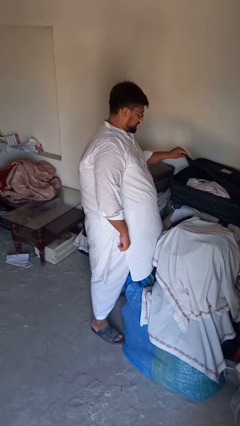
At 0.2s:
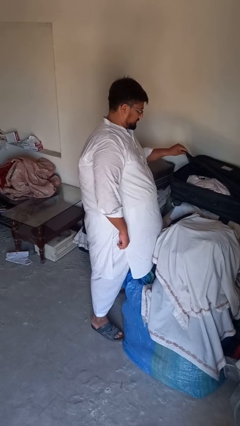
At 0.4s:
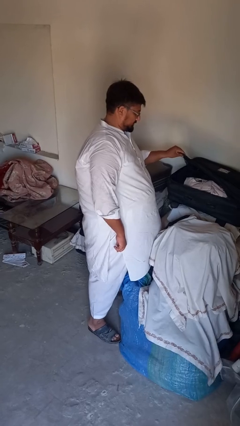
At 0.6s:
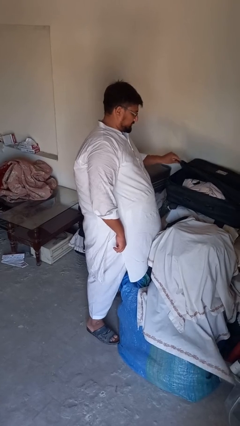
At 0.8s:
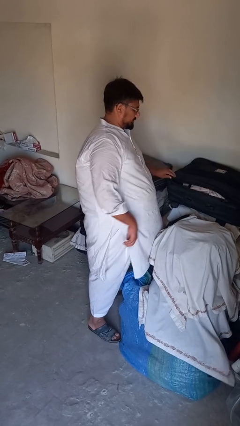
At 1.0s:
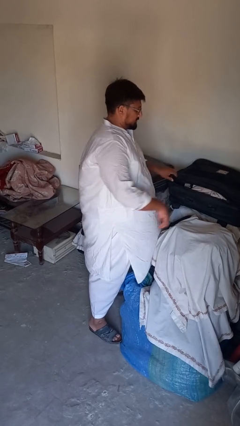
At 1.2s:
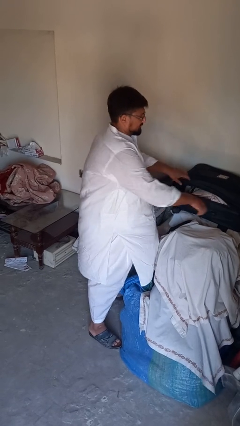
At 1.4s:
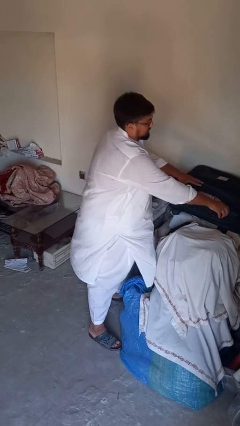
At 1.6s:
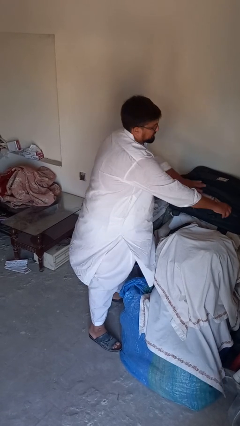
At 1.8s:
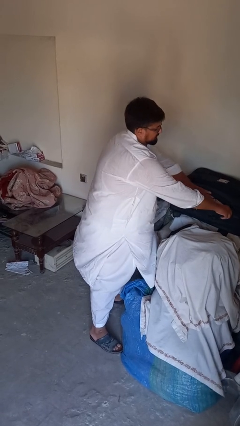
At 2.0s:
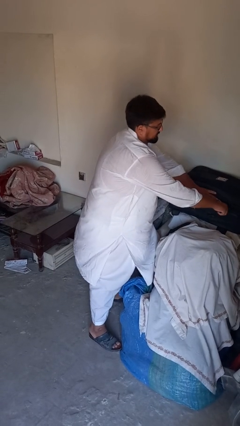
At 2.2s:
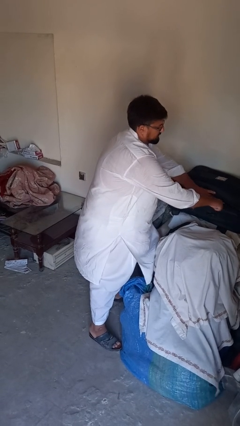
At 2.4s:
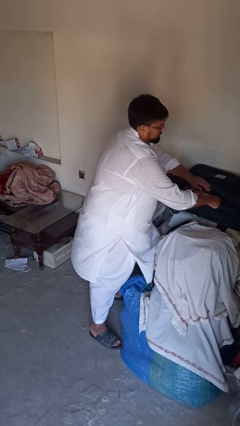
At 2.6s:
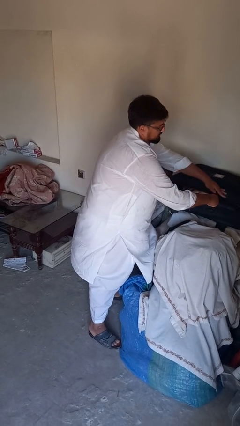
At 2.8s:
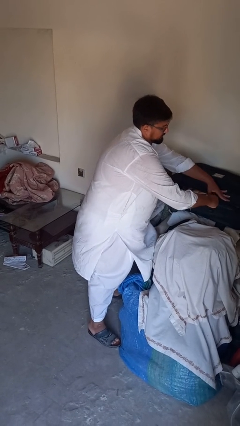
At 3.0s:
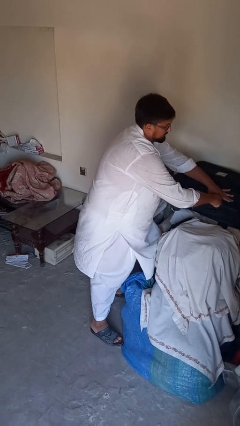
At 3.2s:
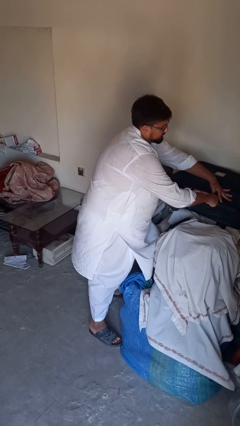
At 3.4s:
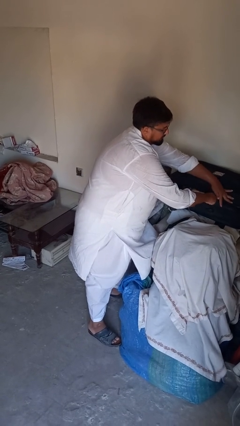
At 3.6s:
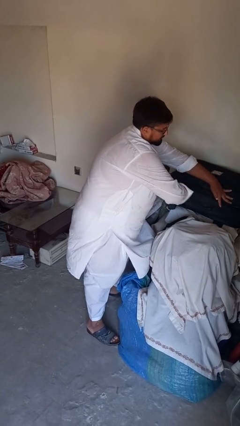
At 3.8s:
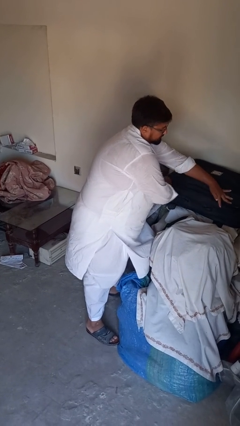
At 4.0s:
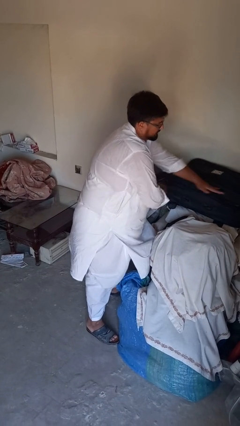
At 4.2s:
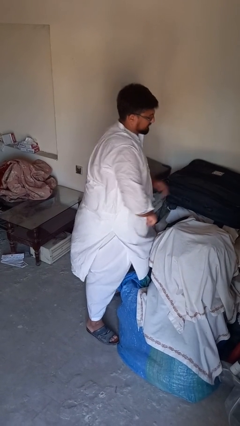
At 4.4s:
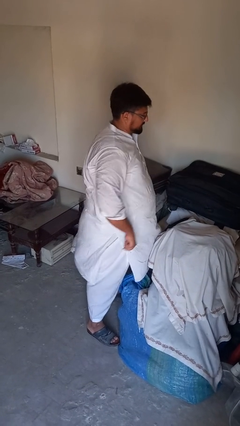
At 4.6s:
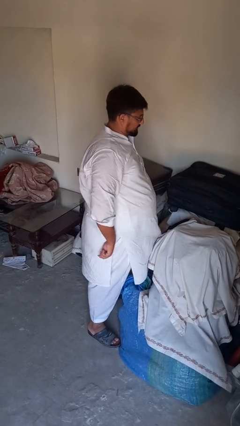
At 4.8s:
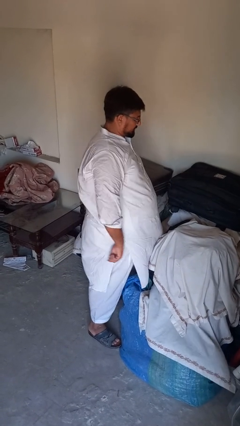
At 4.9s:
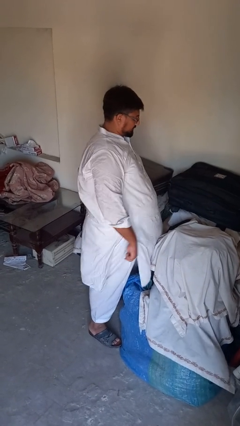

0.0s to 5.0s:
person closes suitcase

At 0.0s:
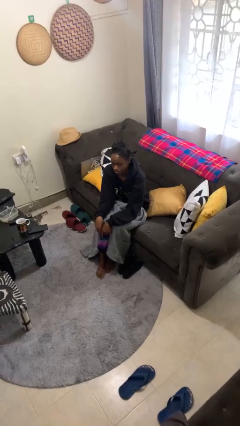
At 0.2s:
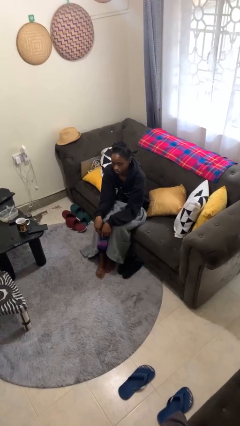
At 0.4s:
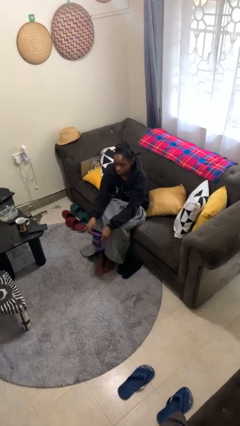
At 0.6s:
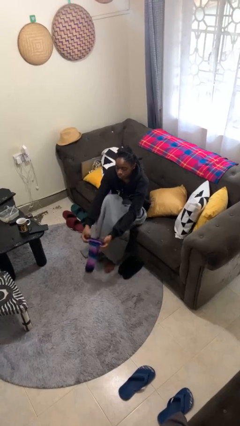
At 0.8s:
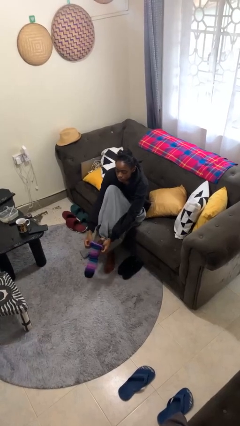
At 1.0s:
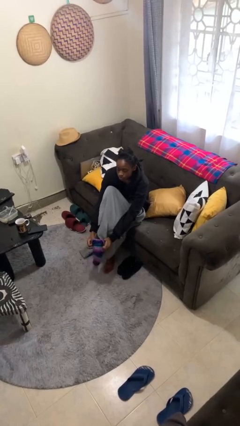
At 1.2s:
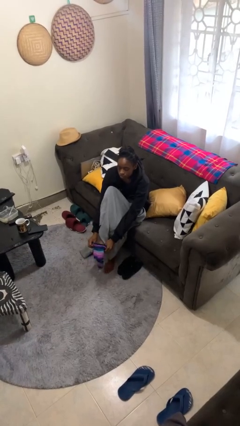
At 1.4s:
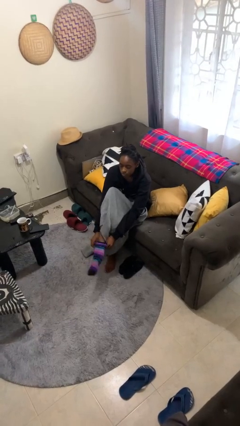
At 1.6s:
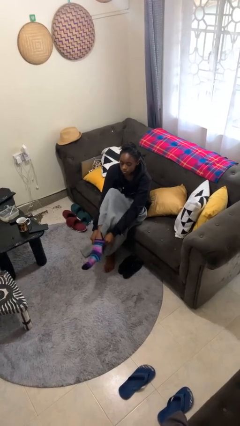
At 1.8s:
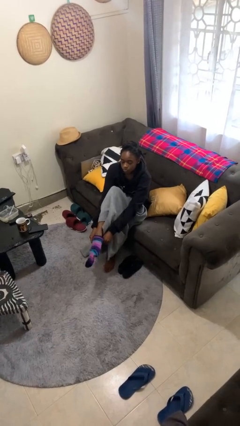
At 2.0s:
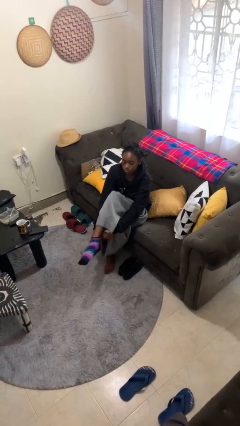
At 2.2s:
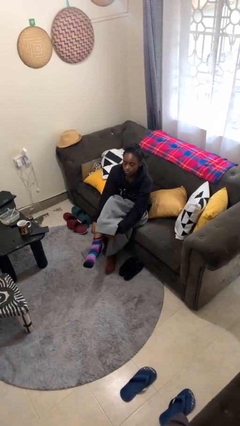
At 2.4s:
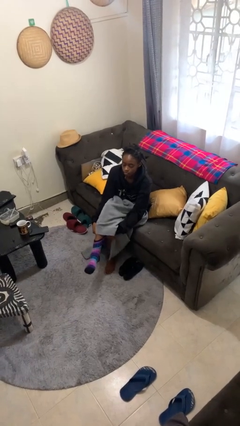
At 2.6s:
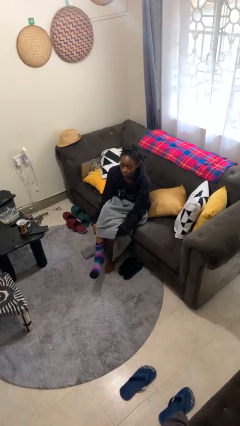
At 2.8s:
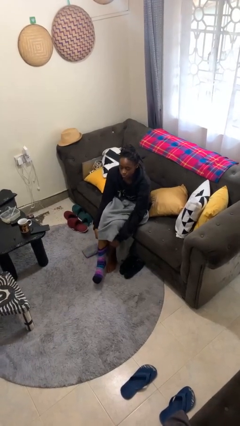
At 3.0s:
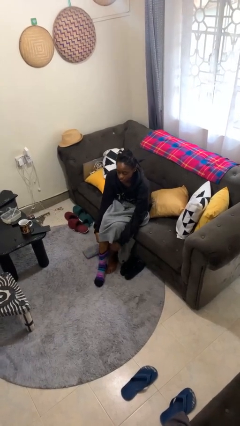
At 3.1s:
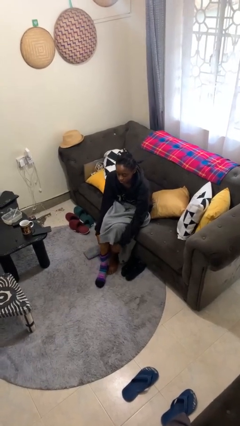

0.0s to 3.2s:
person puts on socks

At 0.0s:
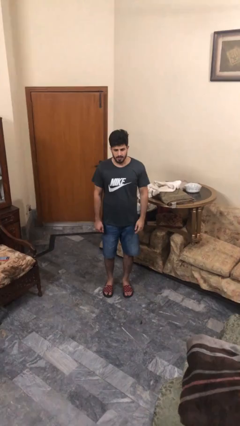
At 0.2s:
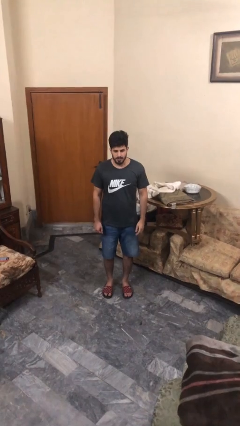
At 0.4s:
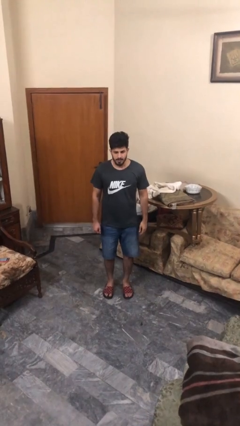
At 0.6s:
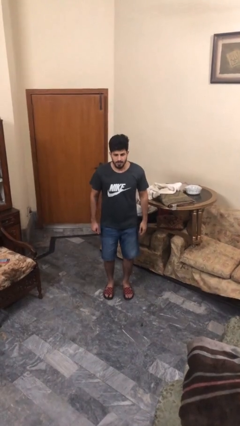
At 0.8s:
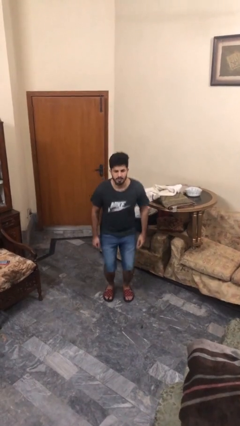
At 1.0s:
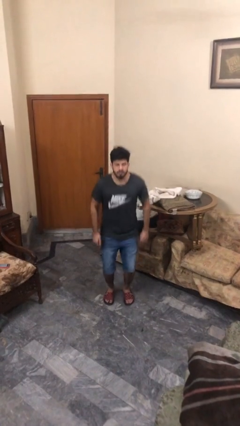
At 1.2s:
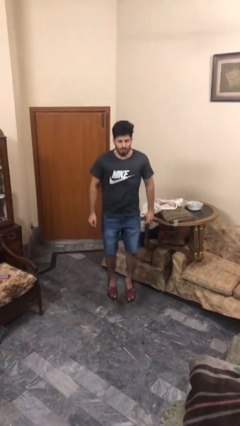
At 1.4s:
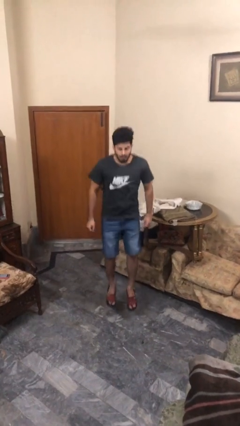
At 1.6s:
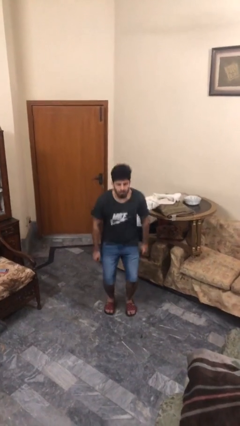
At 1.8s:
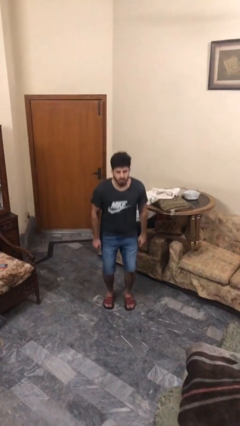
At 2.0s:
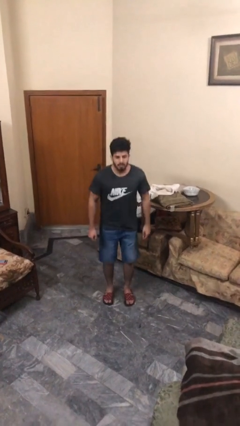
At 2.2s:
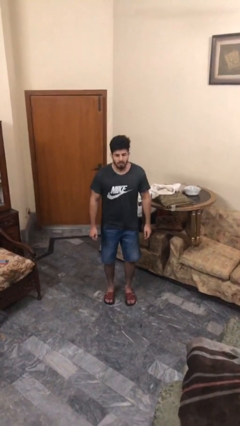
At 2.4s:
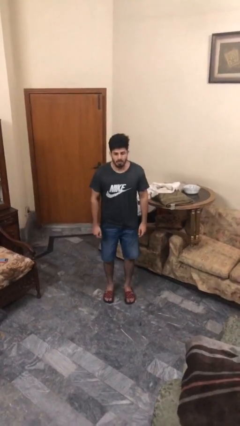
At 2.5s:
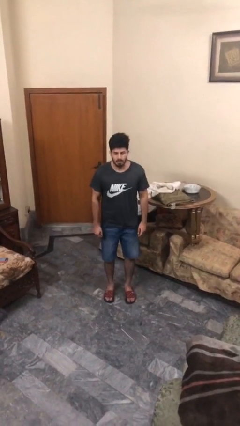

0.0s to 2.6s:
person jumps

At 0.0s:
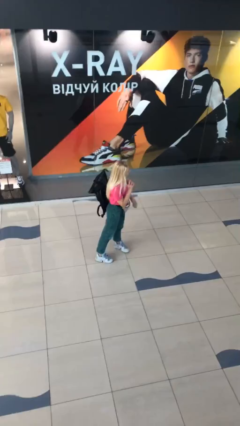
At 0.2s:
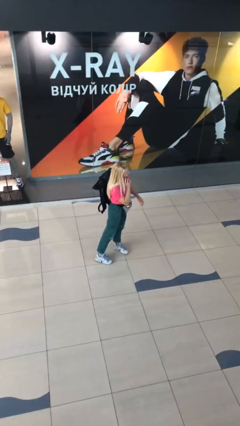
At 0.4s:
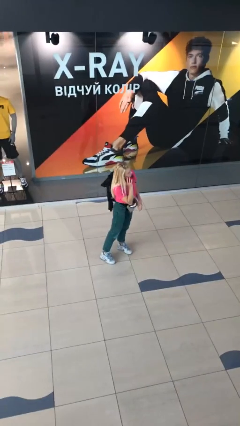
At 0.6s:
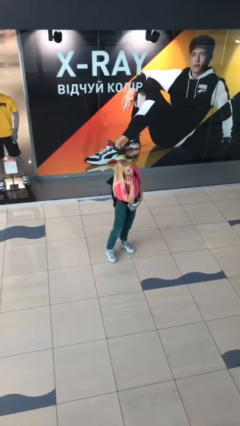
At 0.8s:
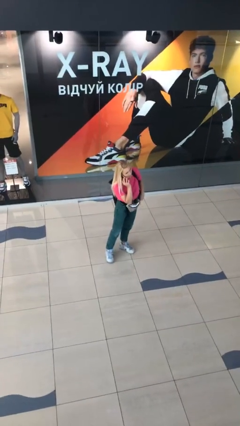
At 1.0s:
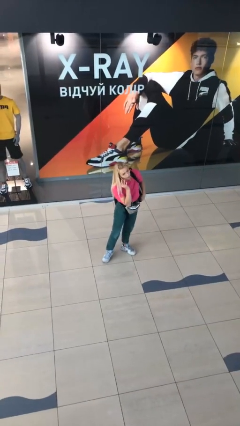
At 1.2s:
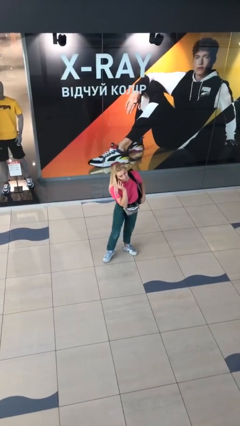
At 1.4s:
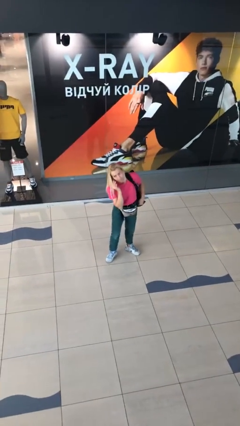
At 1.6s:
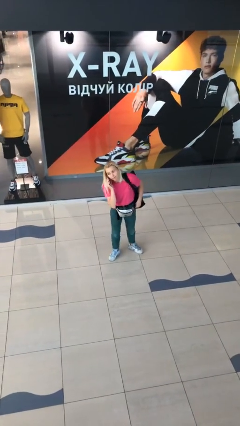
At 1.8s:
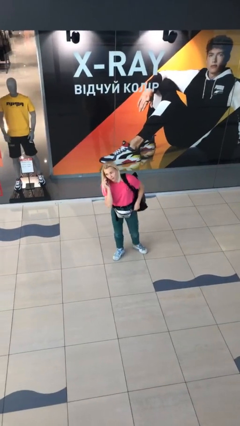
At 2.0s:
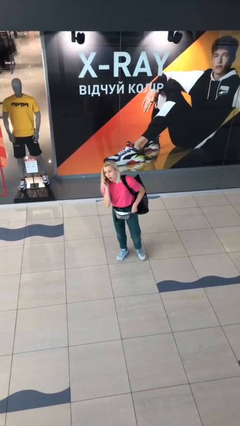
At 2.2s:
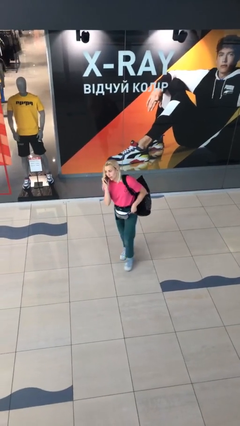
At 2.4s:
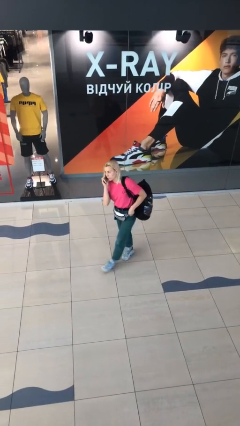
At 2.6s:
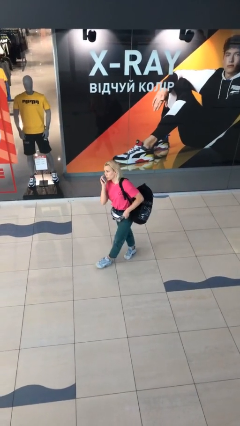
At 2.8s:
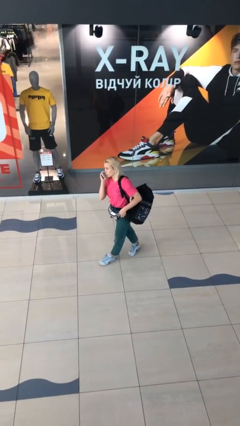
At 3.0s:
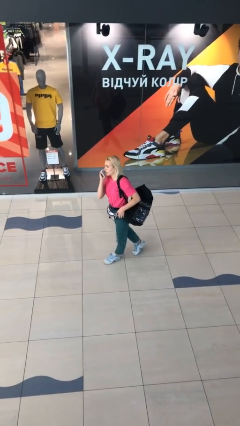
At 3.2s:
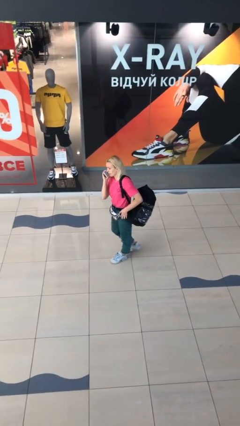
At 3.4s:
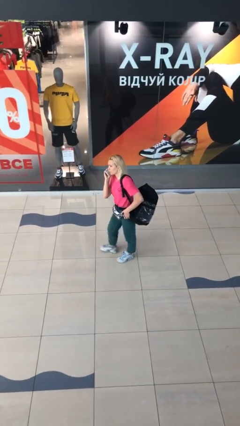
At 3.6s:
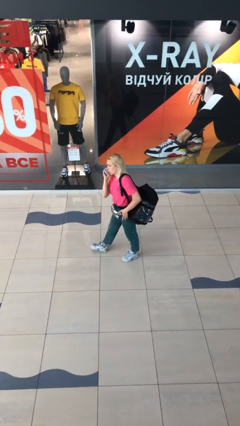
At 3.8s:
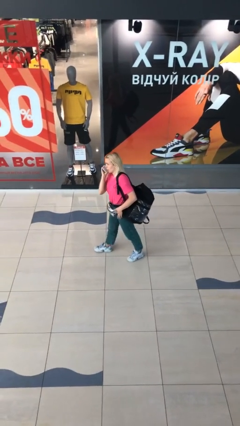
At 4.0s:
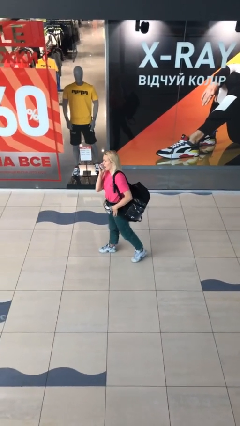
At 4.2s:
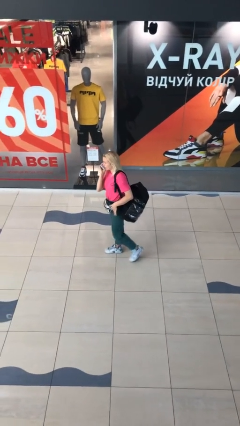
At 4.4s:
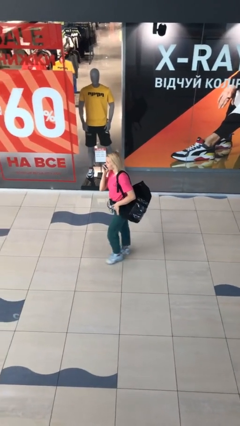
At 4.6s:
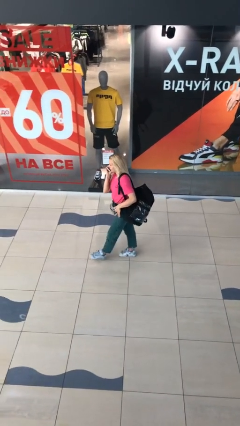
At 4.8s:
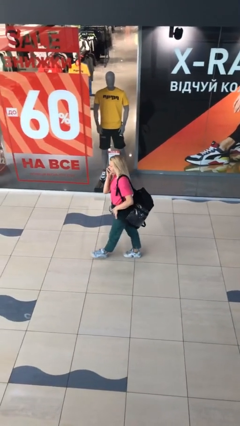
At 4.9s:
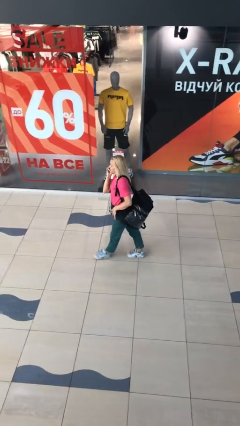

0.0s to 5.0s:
person talks on phone

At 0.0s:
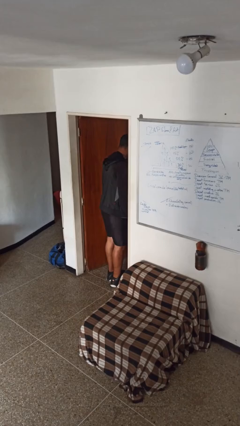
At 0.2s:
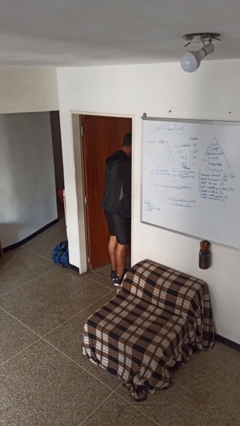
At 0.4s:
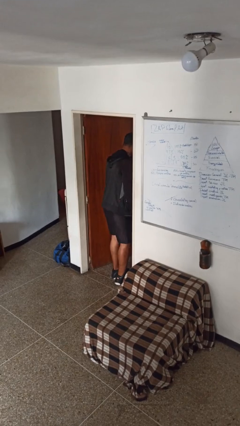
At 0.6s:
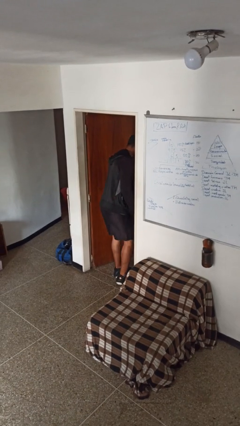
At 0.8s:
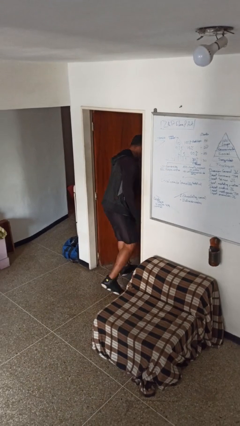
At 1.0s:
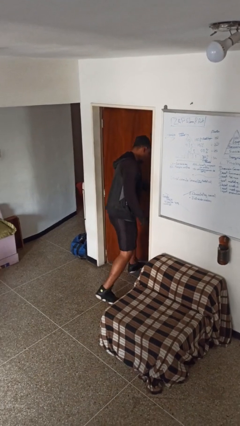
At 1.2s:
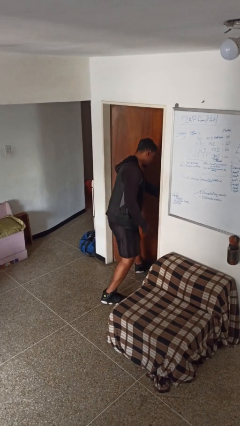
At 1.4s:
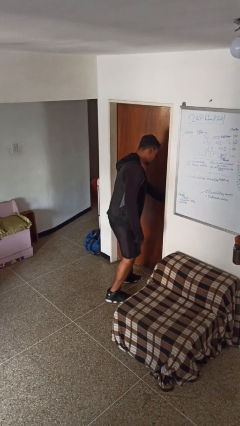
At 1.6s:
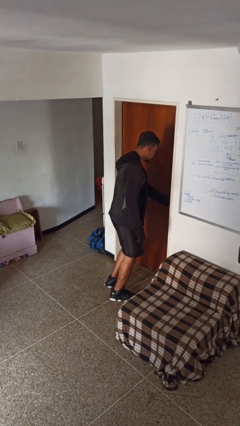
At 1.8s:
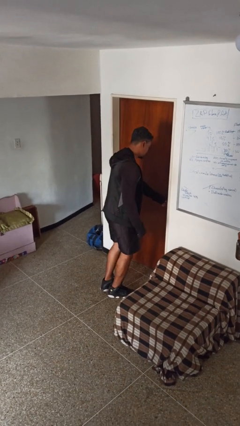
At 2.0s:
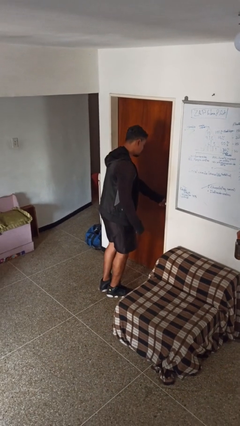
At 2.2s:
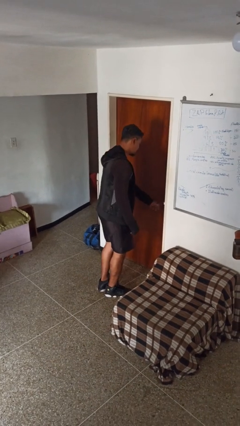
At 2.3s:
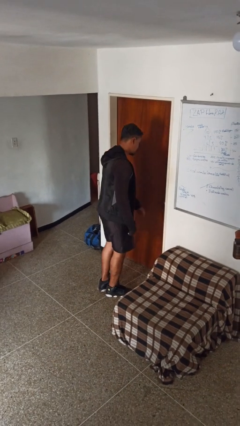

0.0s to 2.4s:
person closes facility door
